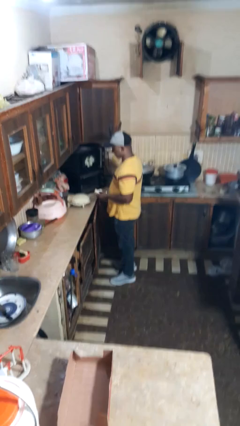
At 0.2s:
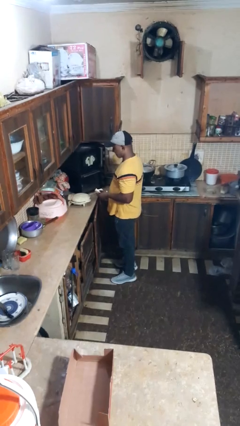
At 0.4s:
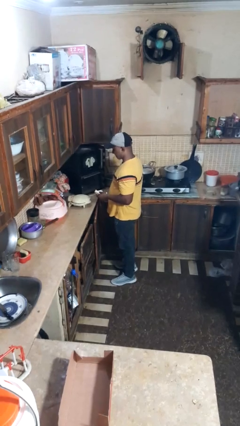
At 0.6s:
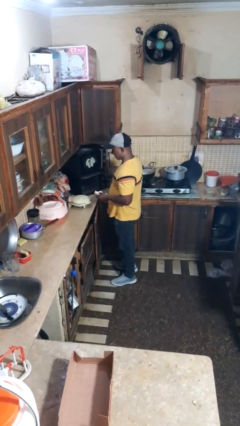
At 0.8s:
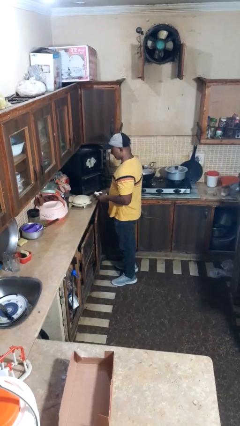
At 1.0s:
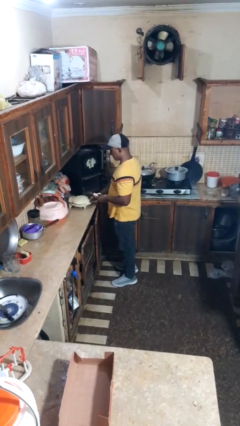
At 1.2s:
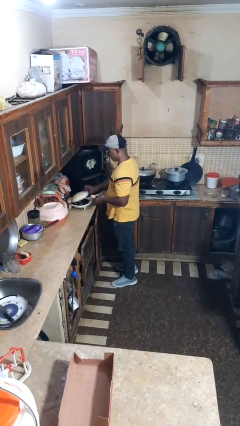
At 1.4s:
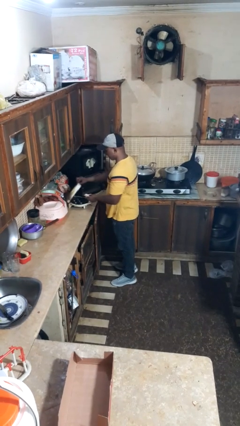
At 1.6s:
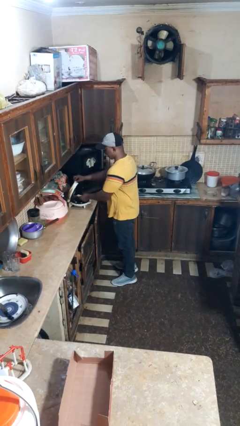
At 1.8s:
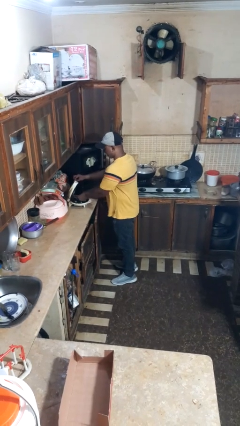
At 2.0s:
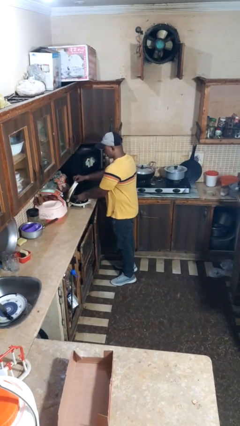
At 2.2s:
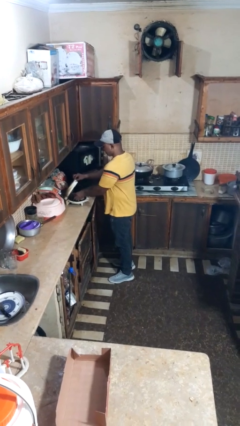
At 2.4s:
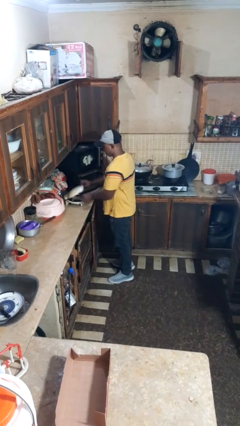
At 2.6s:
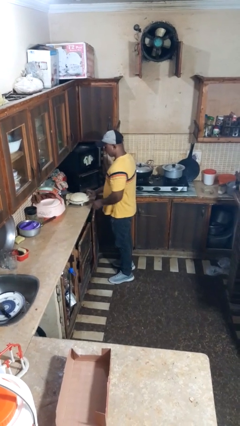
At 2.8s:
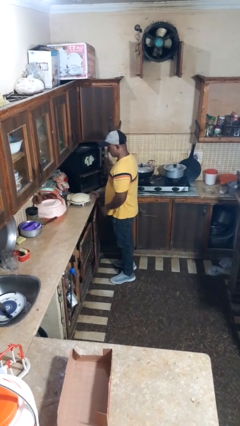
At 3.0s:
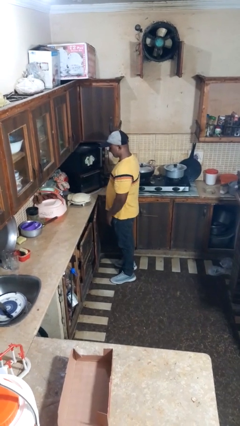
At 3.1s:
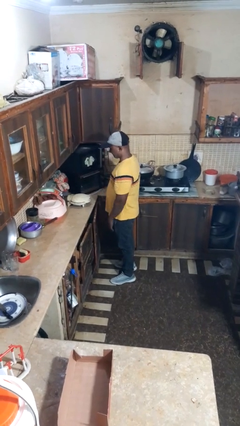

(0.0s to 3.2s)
person puts object into toaster

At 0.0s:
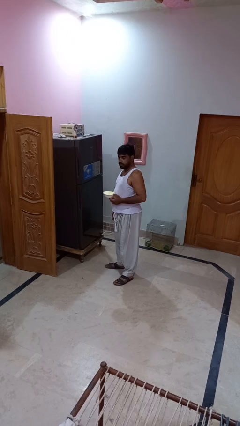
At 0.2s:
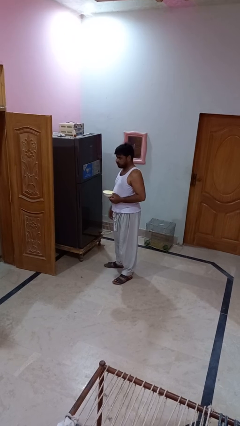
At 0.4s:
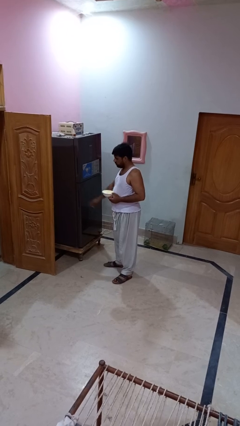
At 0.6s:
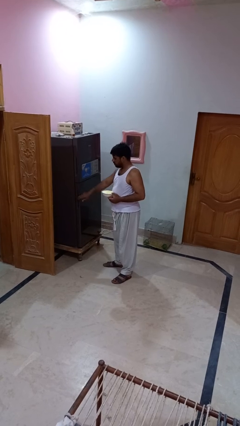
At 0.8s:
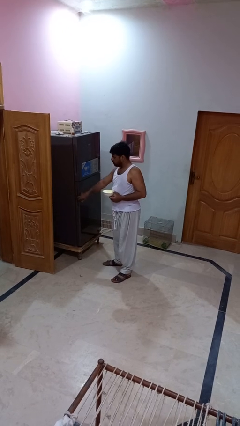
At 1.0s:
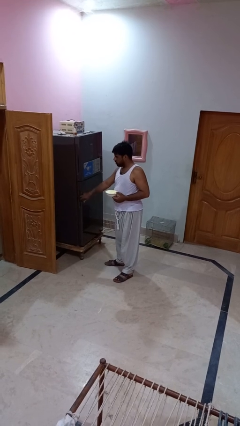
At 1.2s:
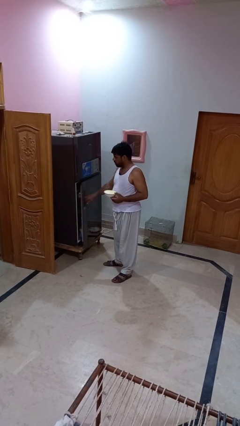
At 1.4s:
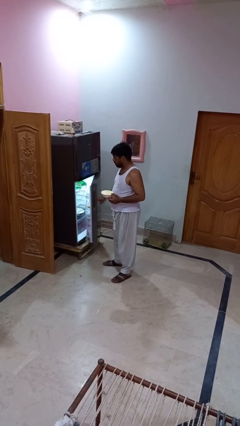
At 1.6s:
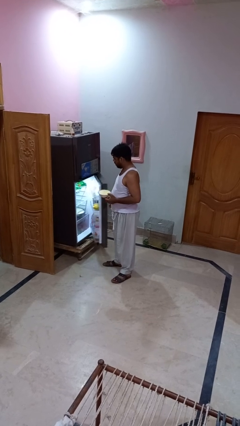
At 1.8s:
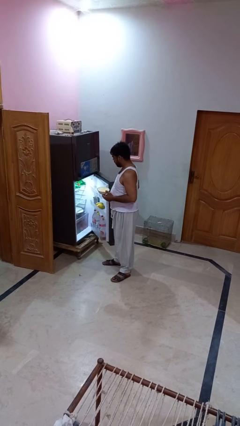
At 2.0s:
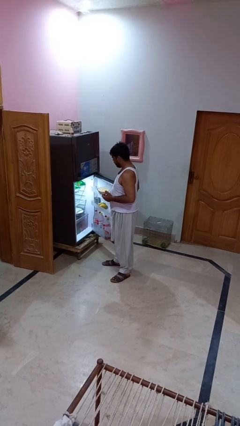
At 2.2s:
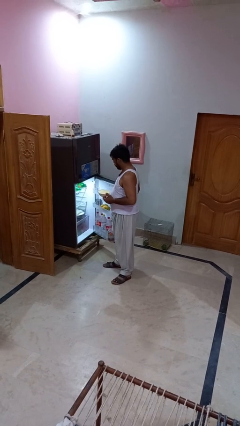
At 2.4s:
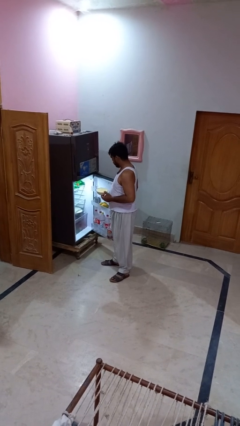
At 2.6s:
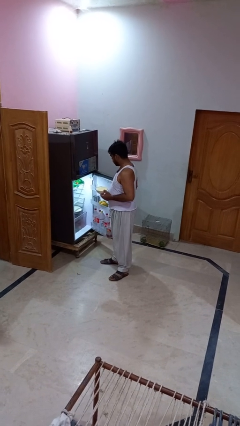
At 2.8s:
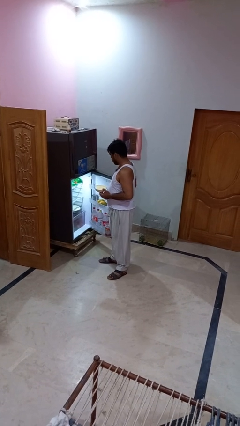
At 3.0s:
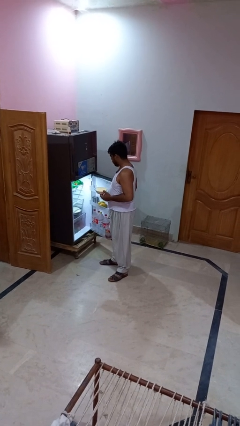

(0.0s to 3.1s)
person opens refrigerator

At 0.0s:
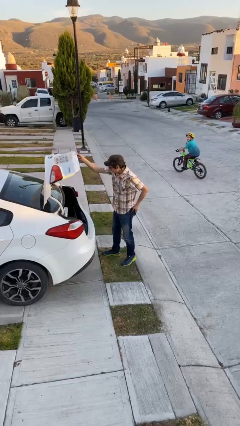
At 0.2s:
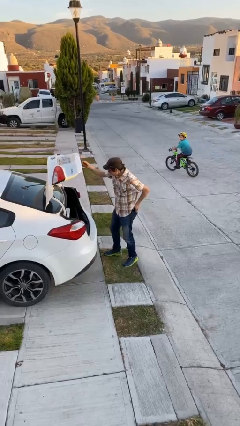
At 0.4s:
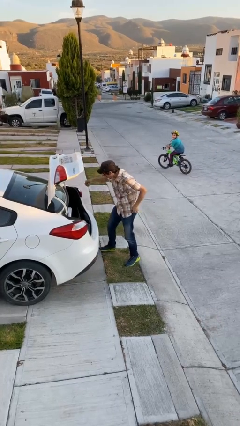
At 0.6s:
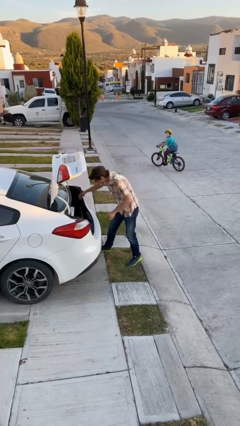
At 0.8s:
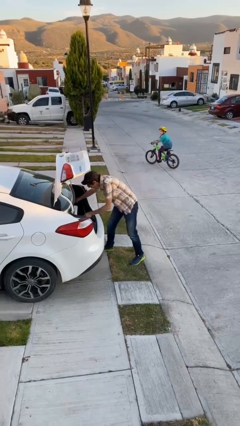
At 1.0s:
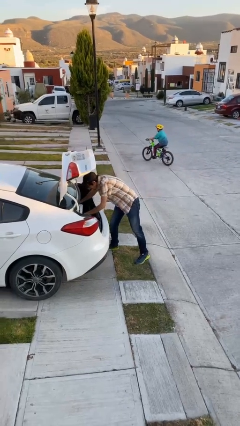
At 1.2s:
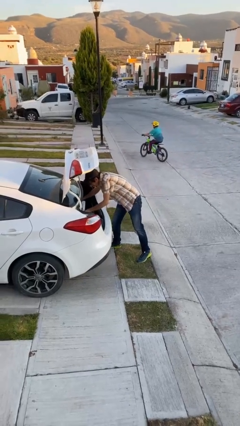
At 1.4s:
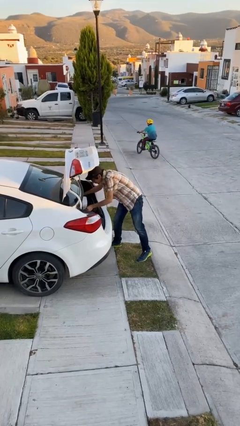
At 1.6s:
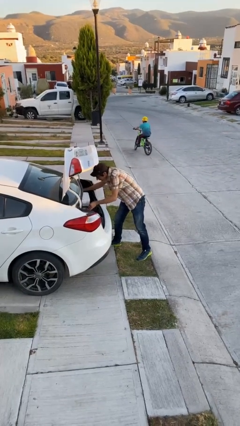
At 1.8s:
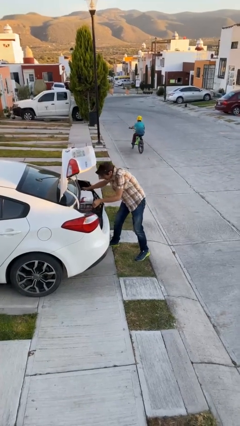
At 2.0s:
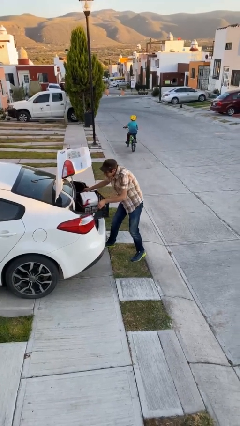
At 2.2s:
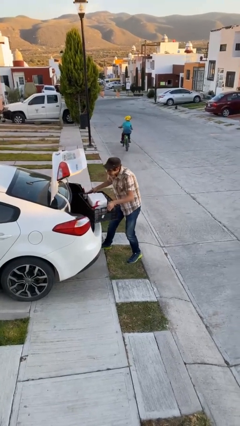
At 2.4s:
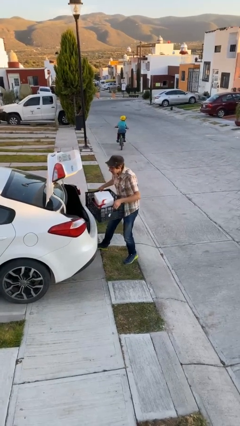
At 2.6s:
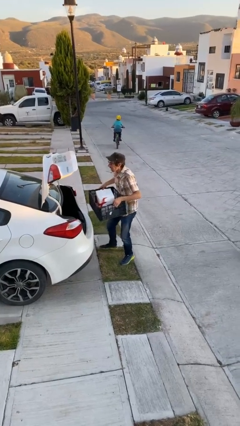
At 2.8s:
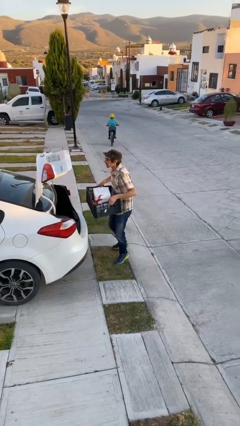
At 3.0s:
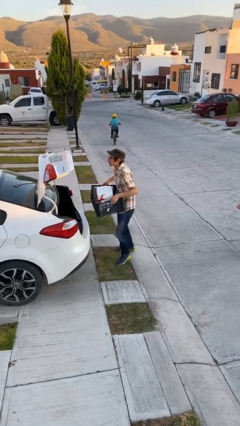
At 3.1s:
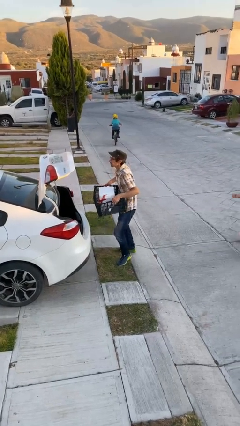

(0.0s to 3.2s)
person unloads car

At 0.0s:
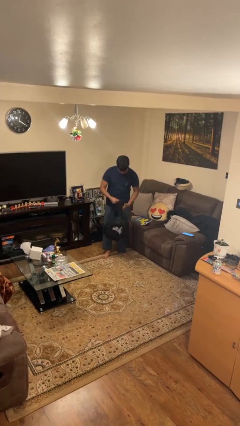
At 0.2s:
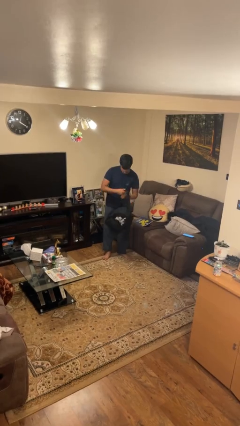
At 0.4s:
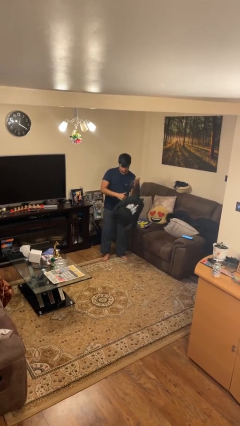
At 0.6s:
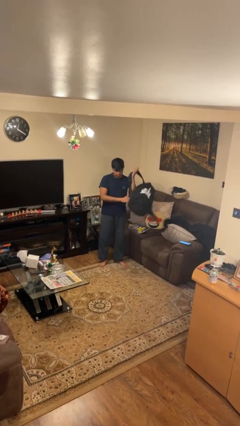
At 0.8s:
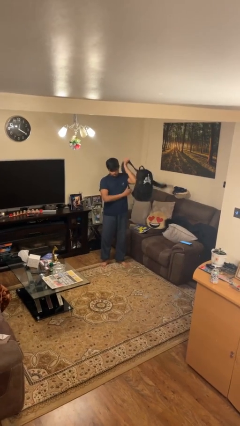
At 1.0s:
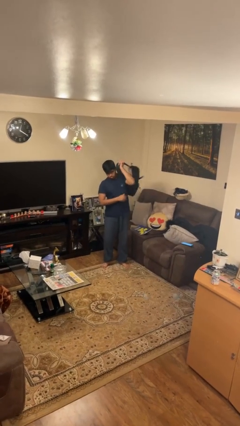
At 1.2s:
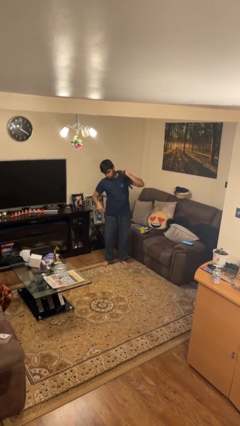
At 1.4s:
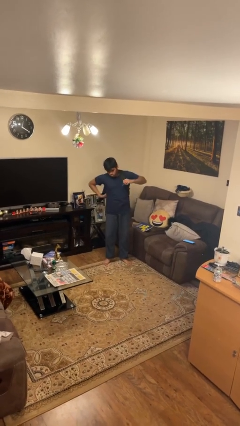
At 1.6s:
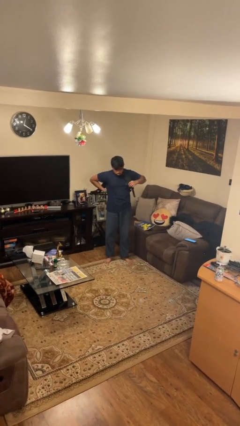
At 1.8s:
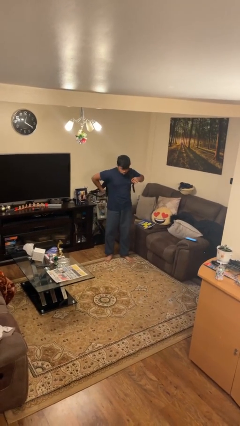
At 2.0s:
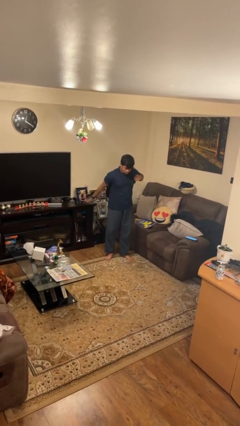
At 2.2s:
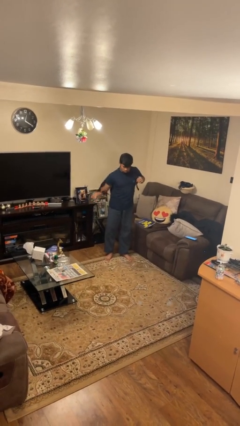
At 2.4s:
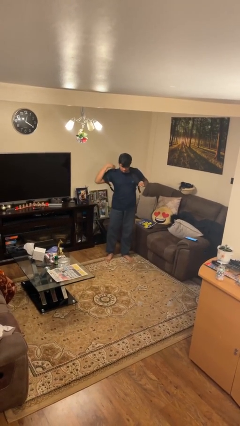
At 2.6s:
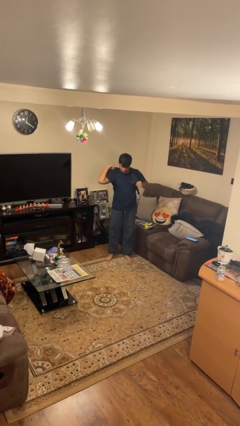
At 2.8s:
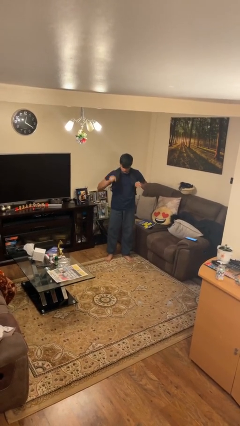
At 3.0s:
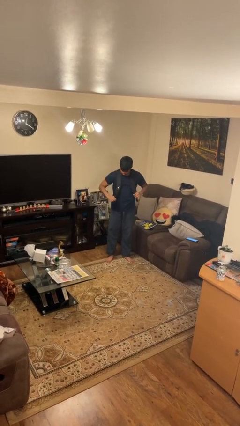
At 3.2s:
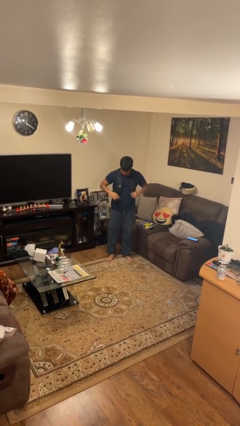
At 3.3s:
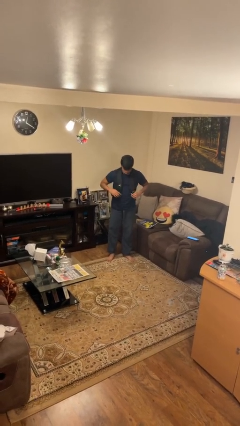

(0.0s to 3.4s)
person puts on backpack

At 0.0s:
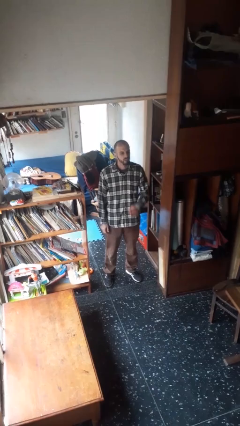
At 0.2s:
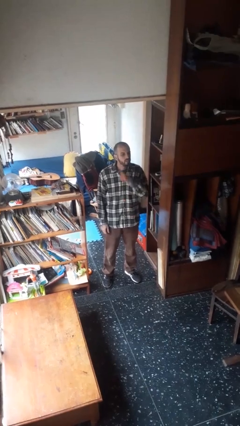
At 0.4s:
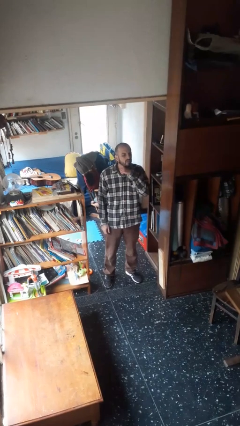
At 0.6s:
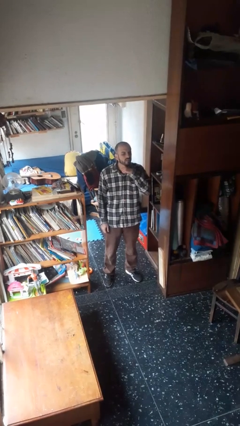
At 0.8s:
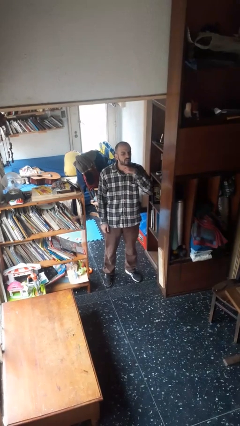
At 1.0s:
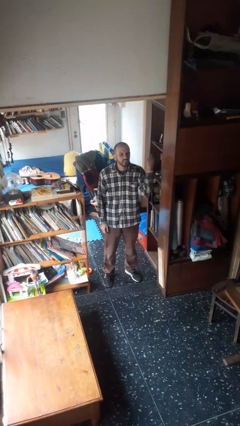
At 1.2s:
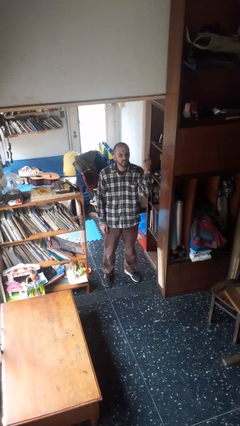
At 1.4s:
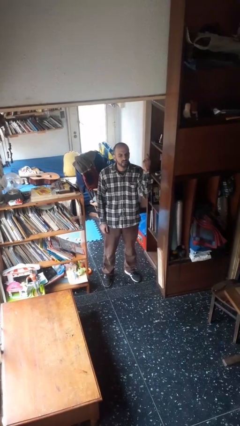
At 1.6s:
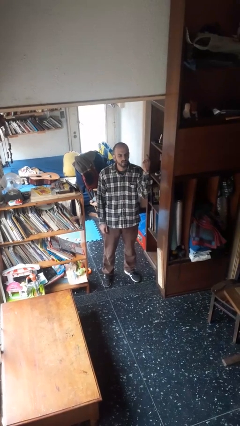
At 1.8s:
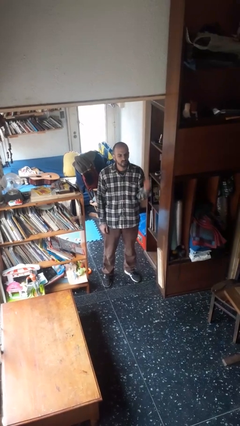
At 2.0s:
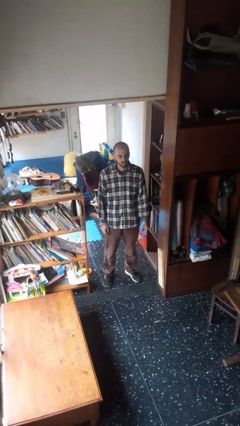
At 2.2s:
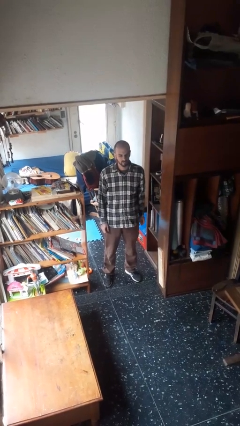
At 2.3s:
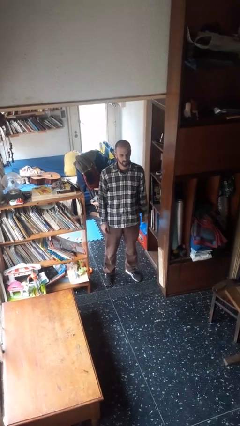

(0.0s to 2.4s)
person gestures cut

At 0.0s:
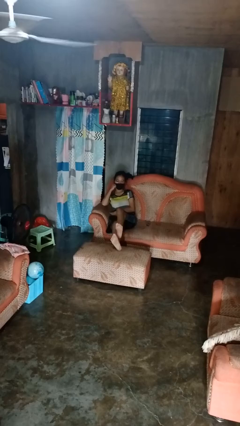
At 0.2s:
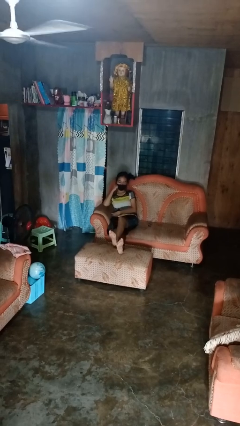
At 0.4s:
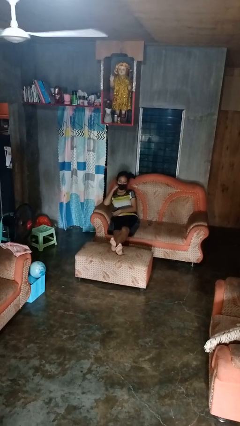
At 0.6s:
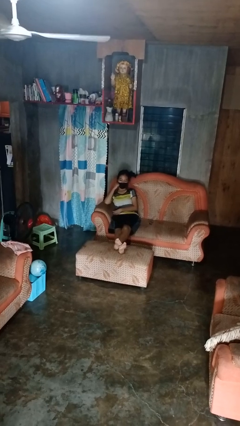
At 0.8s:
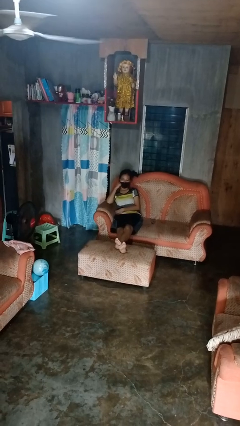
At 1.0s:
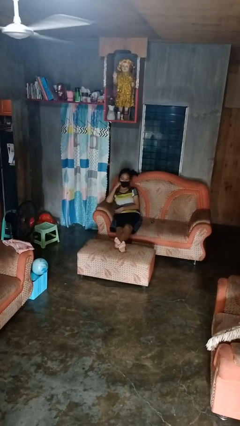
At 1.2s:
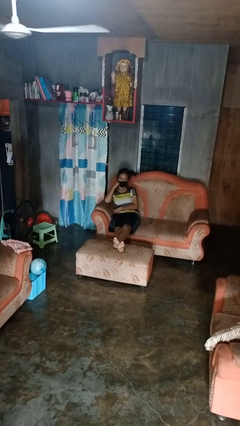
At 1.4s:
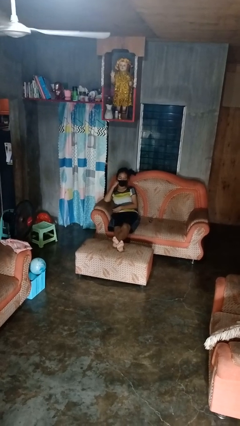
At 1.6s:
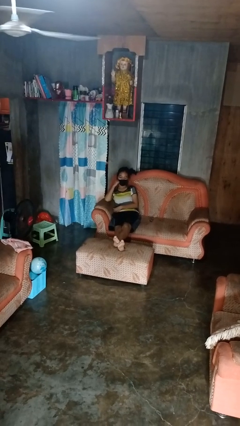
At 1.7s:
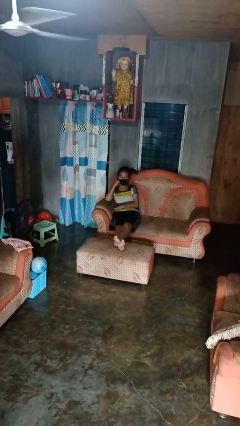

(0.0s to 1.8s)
person puts feet up

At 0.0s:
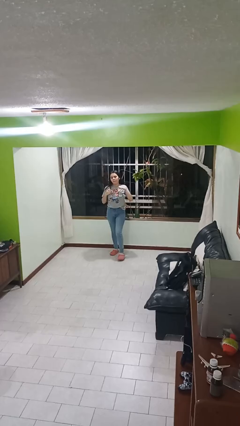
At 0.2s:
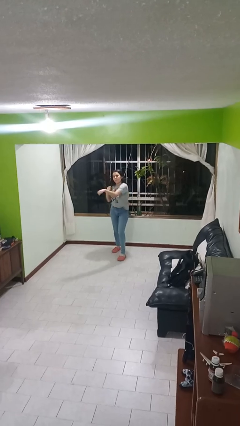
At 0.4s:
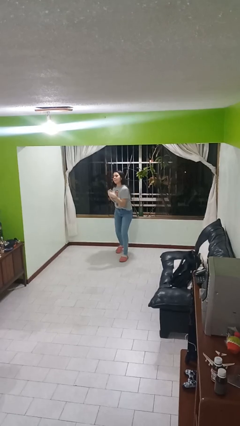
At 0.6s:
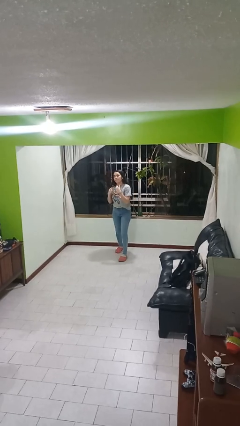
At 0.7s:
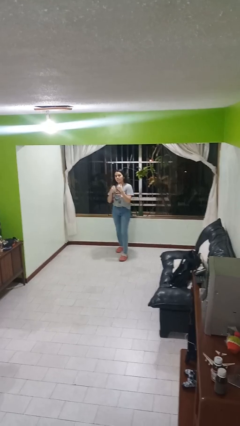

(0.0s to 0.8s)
person punches
